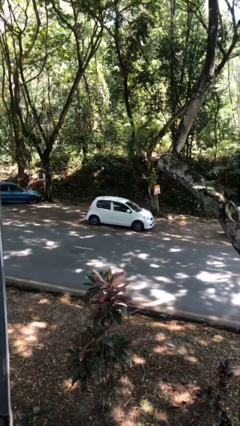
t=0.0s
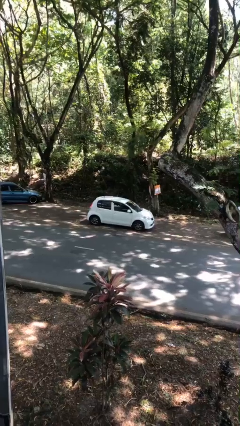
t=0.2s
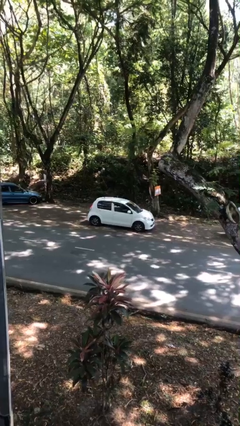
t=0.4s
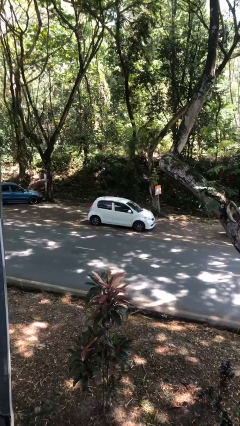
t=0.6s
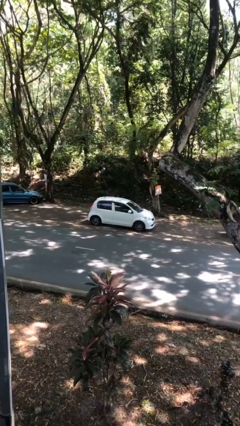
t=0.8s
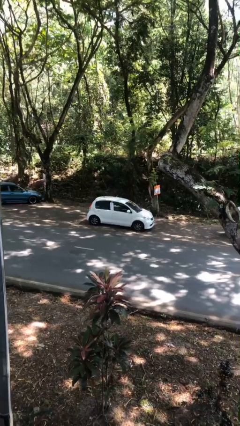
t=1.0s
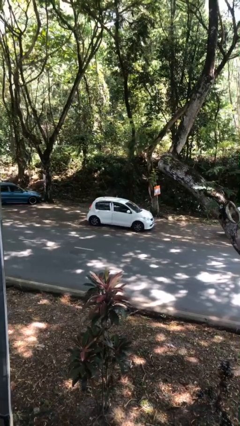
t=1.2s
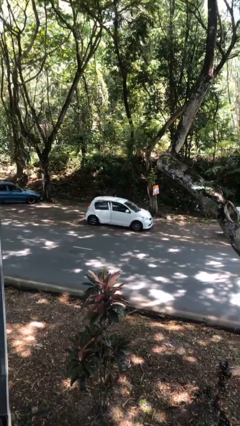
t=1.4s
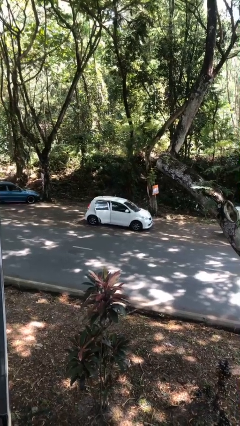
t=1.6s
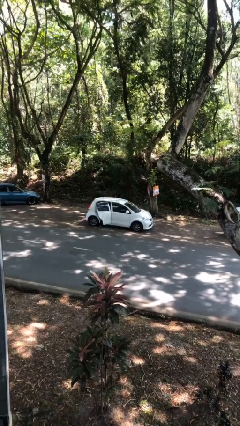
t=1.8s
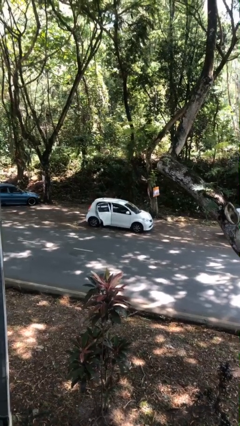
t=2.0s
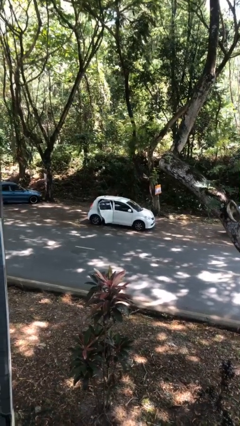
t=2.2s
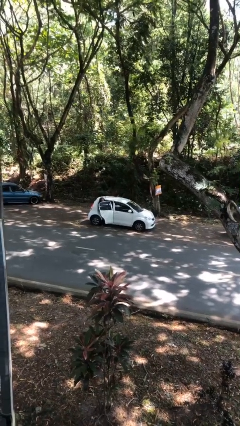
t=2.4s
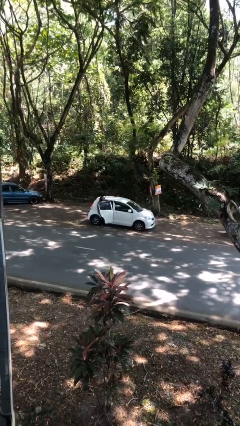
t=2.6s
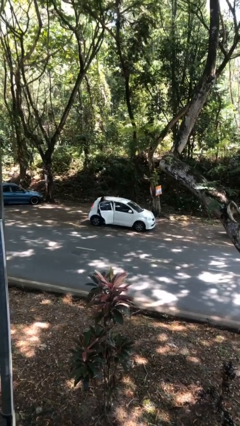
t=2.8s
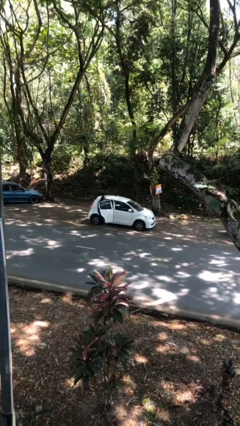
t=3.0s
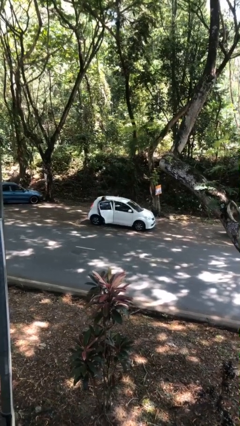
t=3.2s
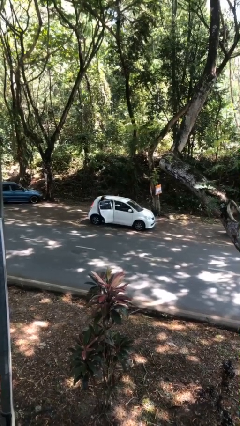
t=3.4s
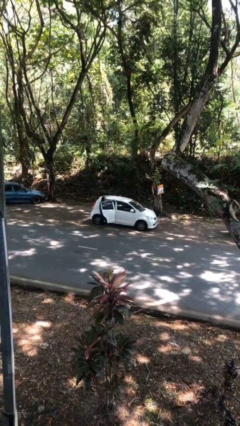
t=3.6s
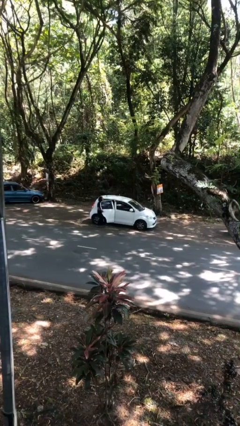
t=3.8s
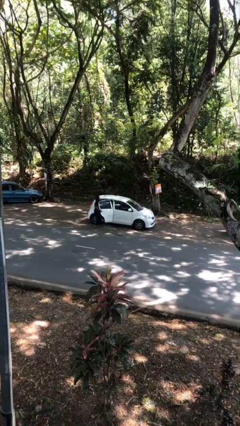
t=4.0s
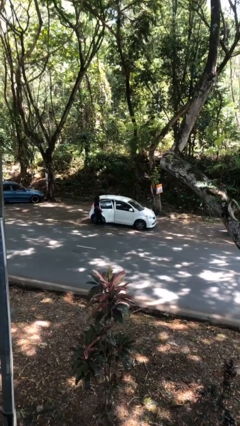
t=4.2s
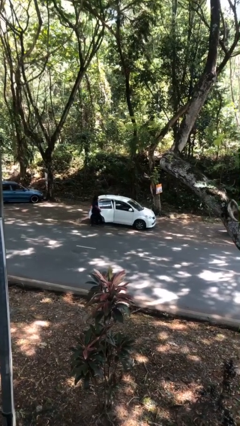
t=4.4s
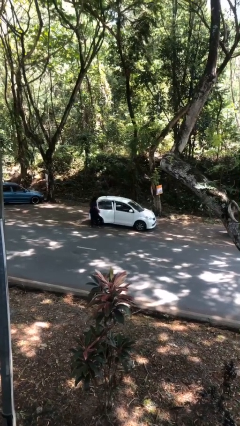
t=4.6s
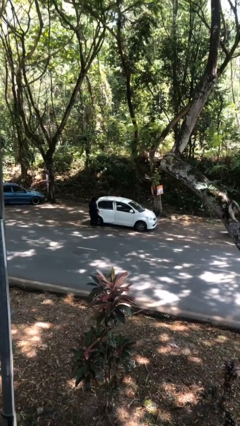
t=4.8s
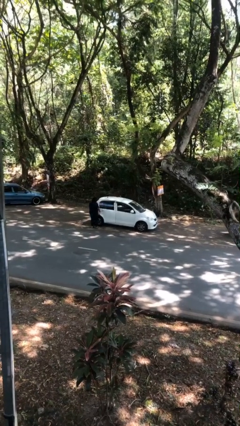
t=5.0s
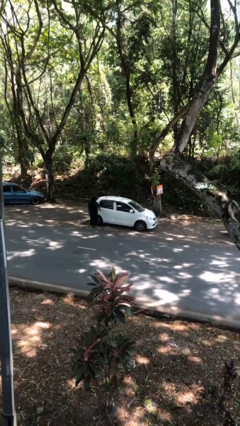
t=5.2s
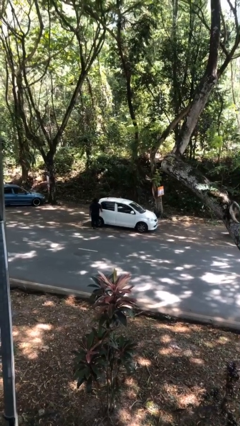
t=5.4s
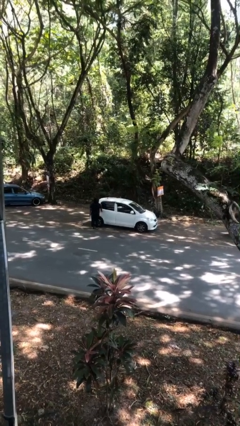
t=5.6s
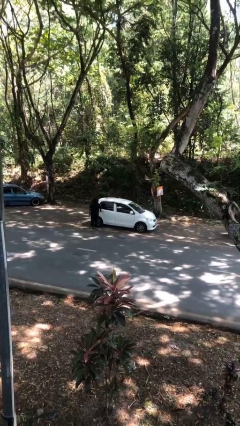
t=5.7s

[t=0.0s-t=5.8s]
car drops off person

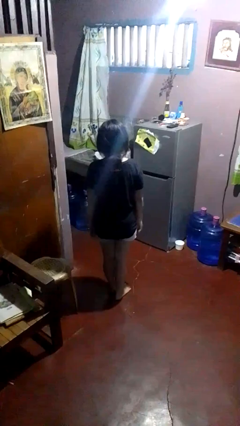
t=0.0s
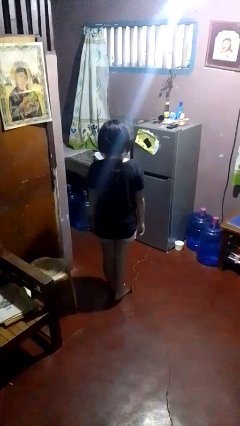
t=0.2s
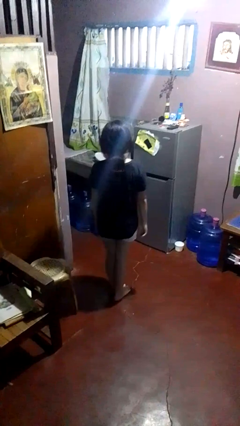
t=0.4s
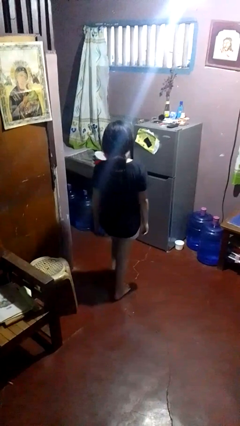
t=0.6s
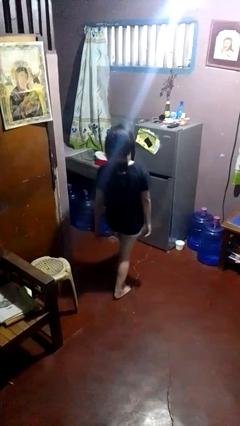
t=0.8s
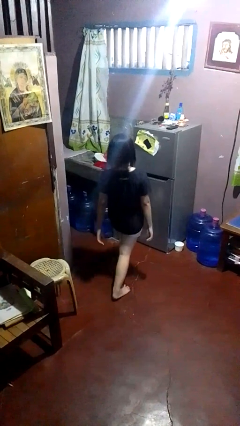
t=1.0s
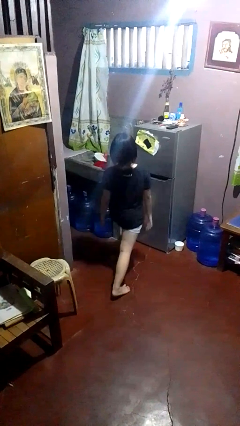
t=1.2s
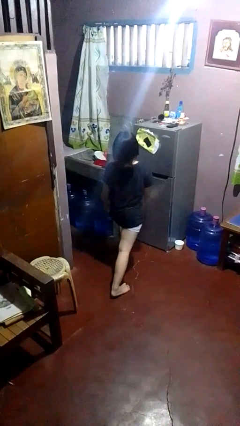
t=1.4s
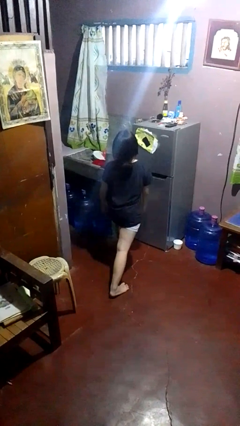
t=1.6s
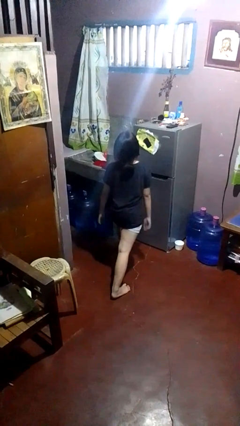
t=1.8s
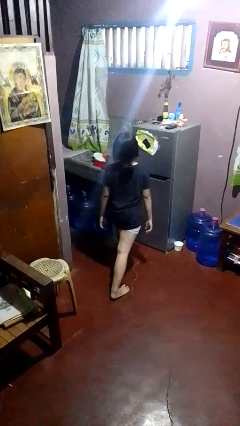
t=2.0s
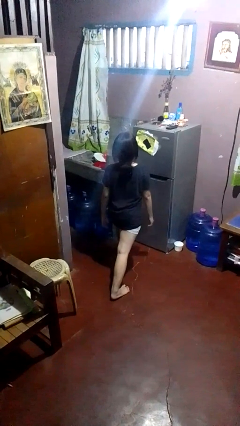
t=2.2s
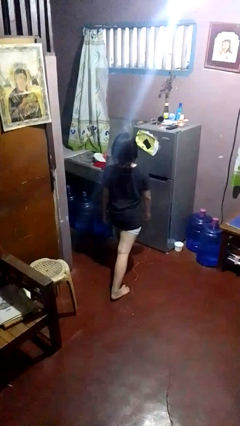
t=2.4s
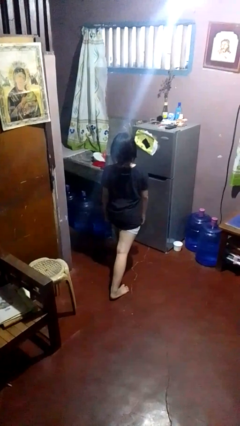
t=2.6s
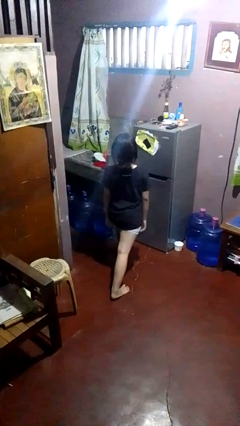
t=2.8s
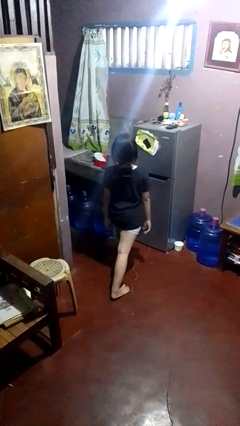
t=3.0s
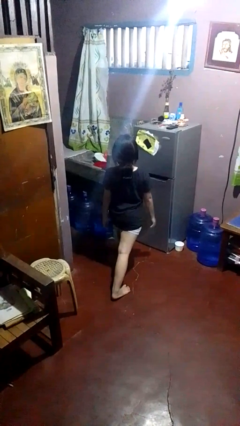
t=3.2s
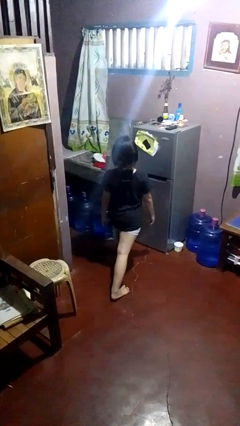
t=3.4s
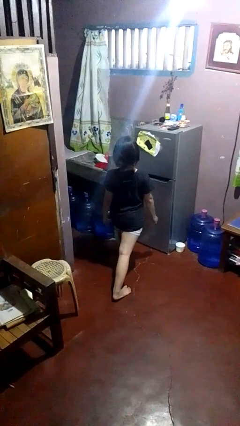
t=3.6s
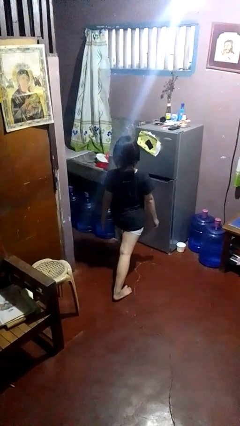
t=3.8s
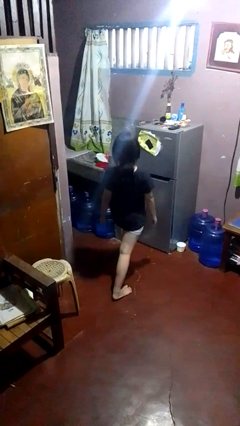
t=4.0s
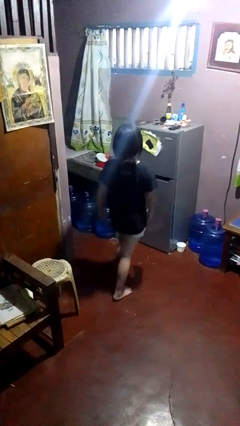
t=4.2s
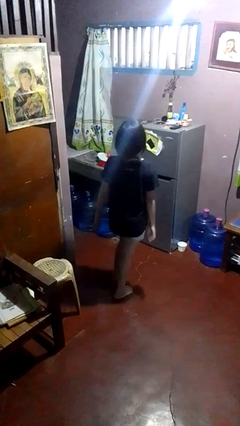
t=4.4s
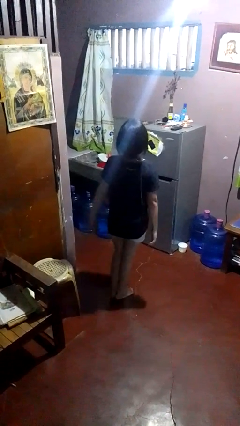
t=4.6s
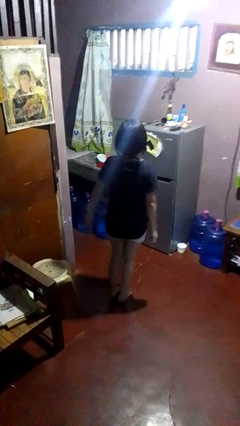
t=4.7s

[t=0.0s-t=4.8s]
person exercises with lunges

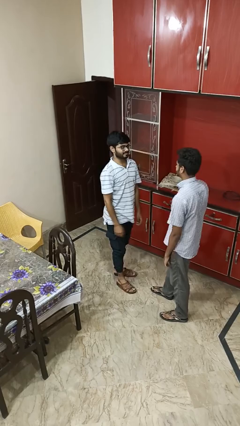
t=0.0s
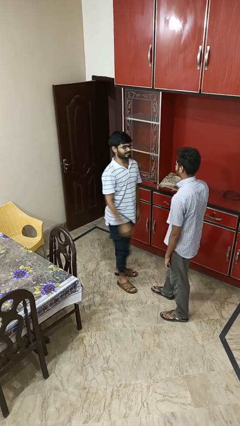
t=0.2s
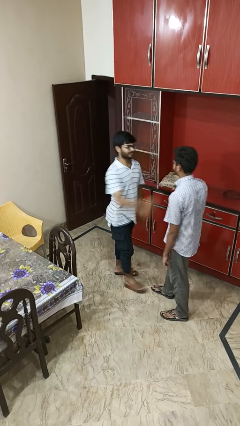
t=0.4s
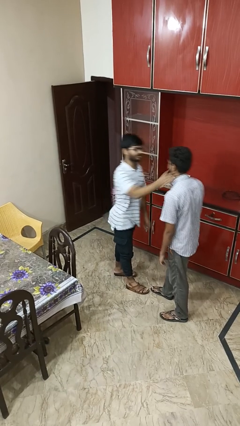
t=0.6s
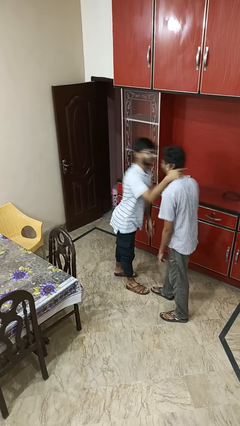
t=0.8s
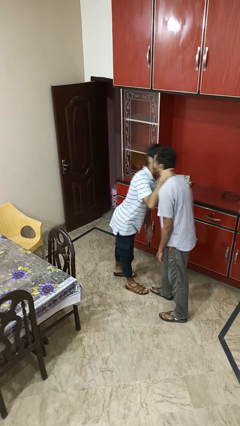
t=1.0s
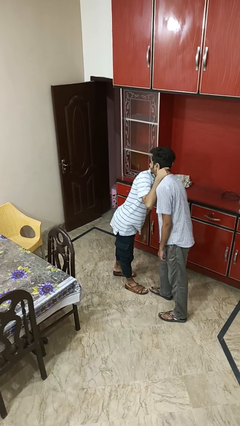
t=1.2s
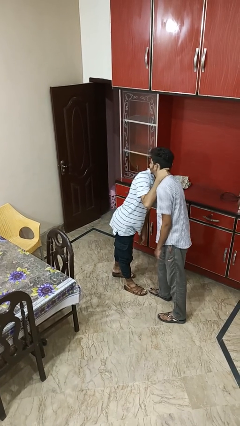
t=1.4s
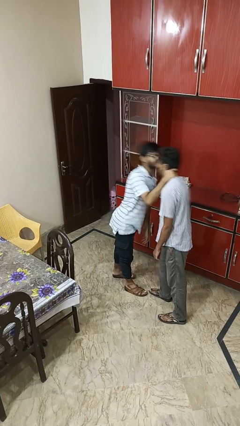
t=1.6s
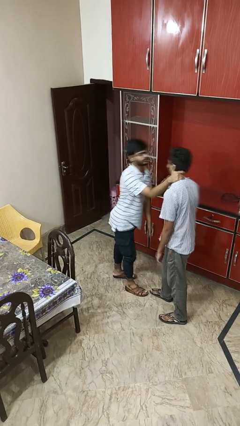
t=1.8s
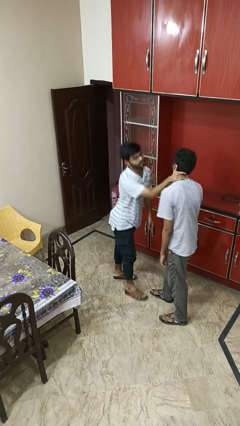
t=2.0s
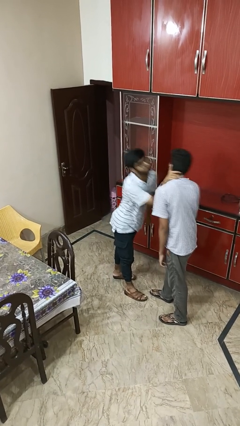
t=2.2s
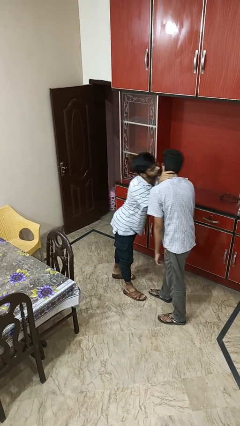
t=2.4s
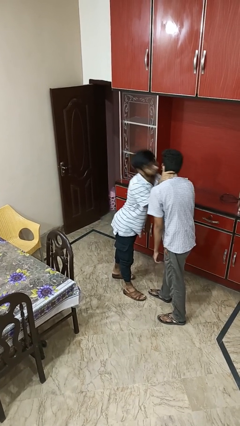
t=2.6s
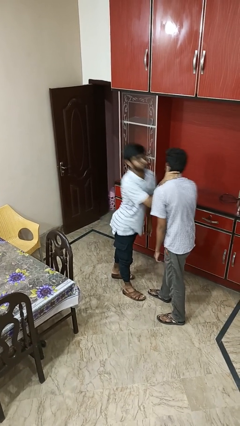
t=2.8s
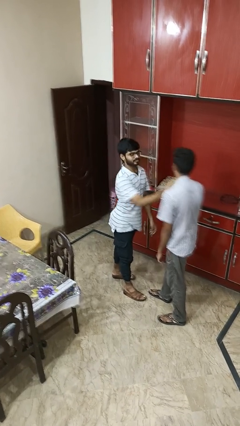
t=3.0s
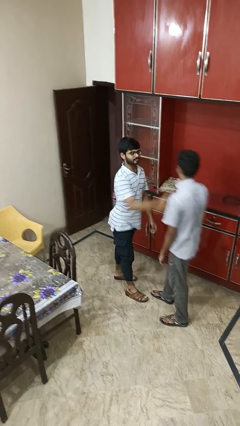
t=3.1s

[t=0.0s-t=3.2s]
person kisses cheek of person

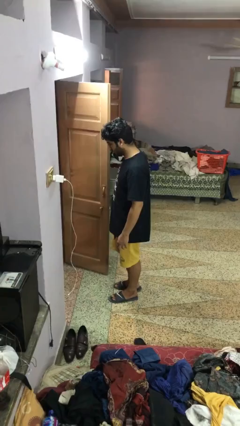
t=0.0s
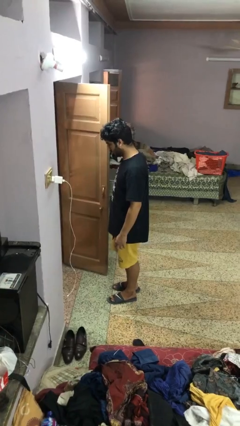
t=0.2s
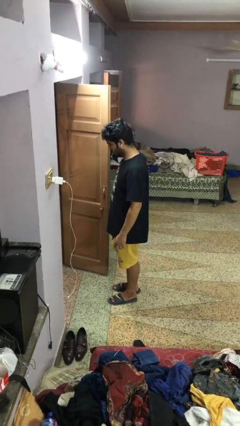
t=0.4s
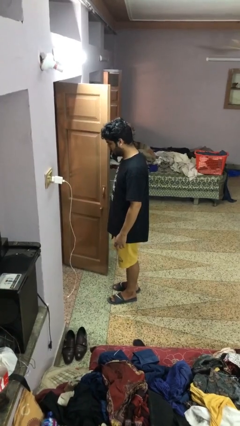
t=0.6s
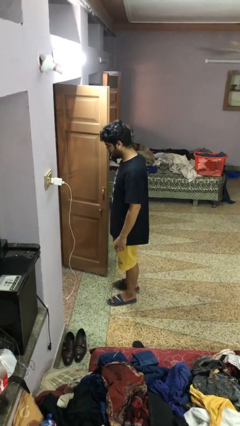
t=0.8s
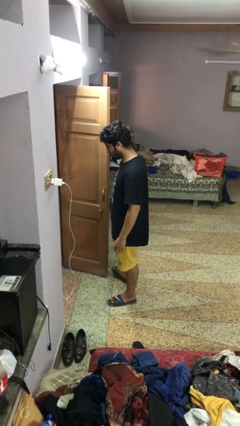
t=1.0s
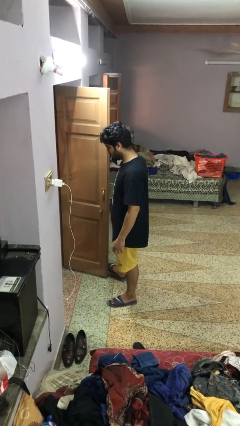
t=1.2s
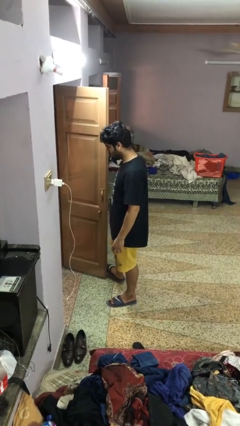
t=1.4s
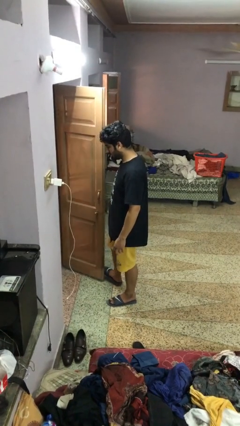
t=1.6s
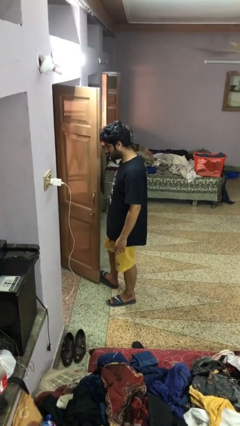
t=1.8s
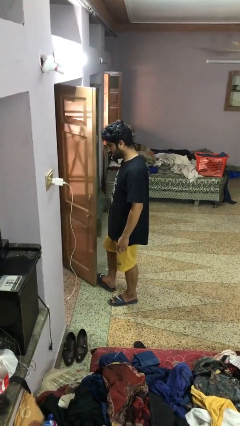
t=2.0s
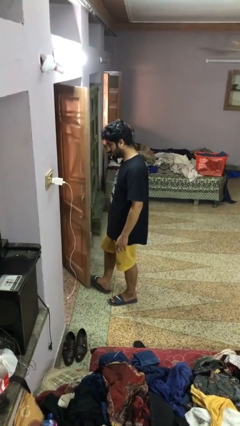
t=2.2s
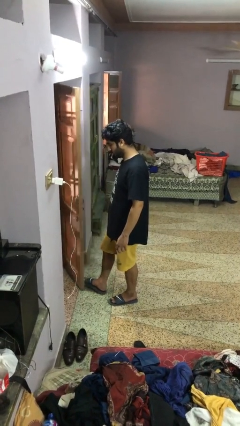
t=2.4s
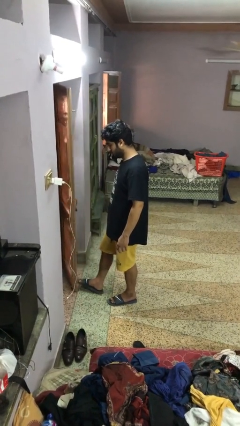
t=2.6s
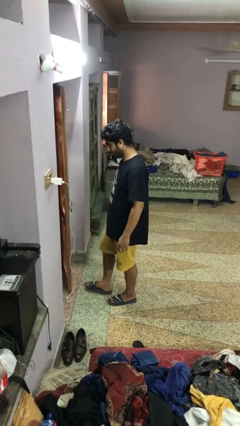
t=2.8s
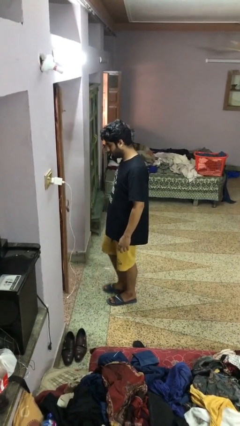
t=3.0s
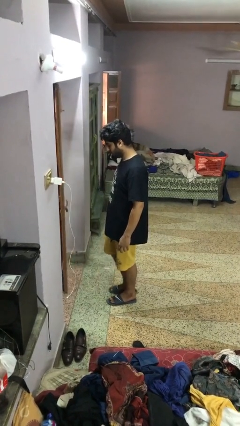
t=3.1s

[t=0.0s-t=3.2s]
person closes door with foot

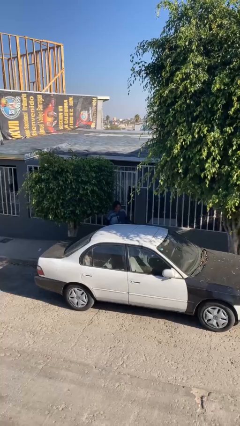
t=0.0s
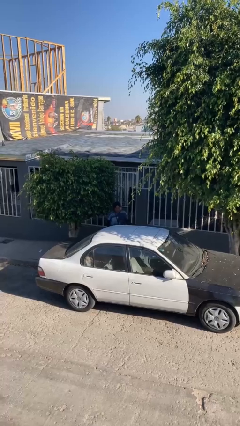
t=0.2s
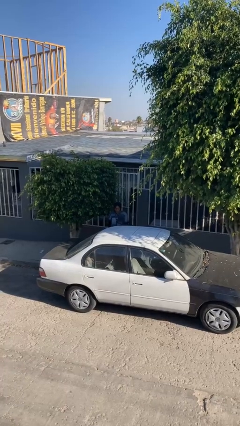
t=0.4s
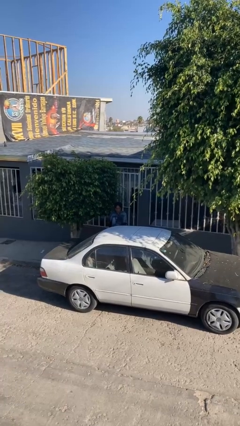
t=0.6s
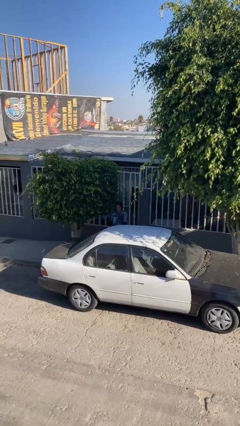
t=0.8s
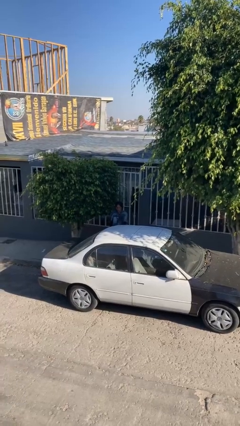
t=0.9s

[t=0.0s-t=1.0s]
person closes car door
